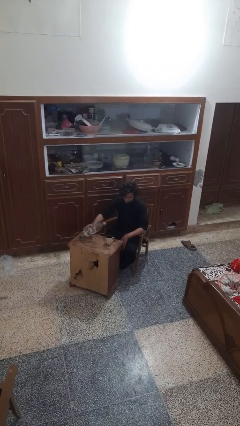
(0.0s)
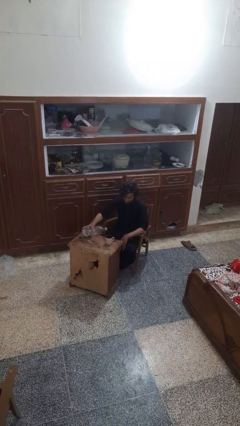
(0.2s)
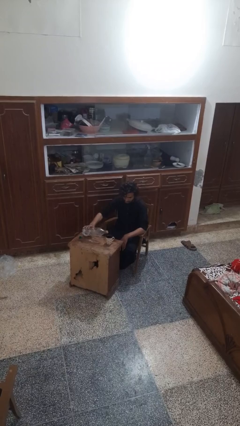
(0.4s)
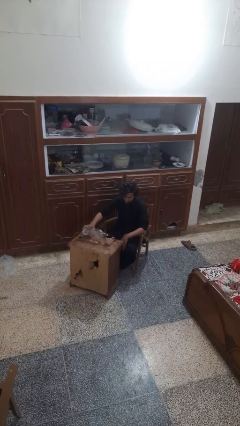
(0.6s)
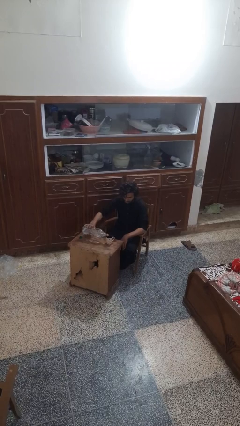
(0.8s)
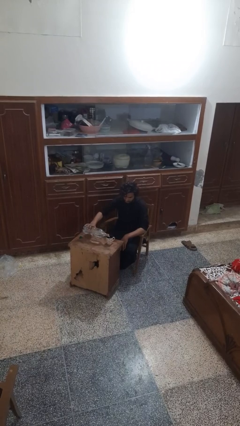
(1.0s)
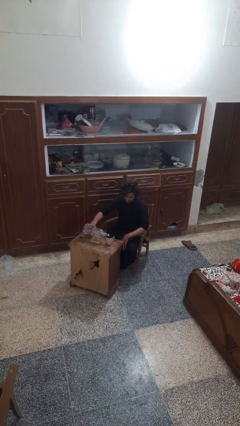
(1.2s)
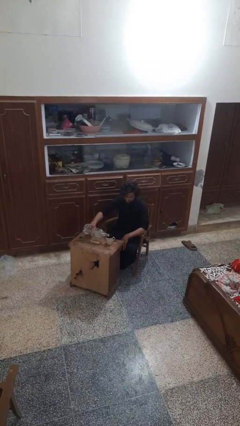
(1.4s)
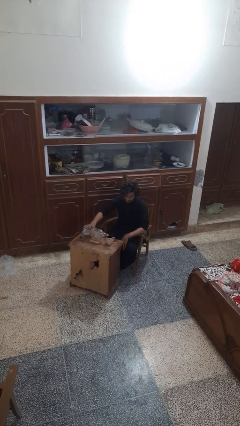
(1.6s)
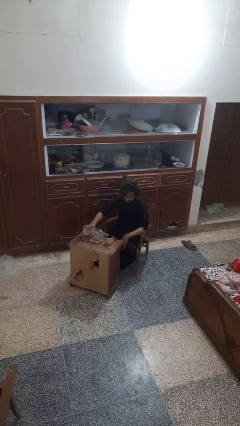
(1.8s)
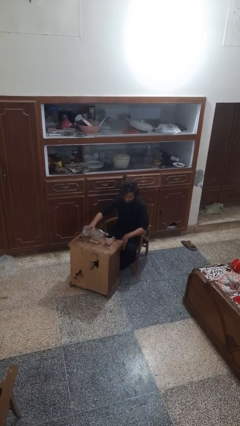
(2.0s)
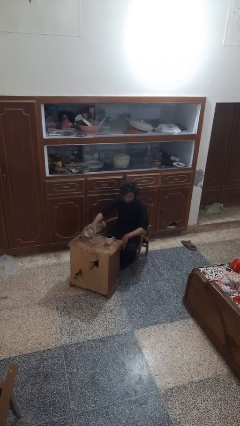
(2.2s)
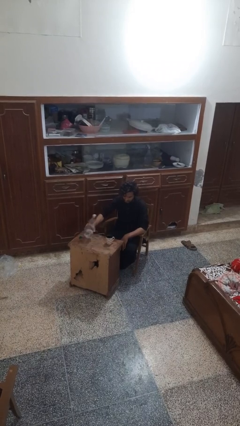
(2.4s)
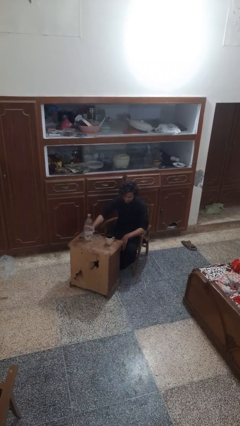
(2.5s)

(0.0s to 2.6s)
person pours liquid into cup

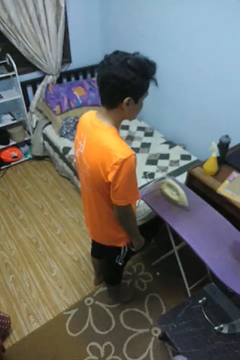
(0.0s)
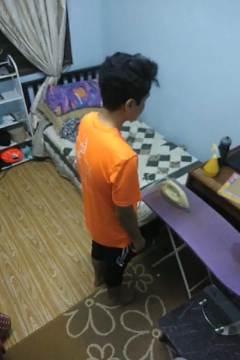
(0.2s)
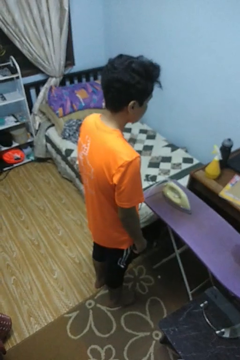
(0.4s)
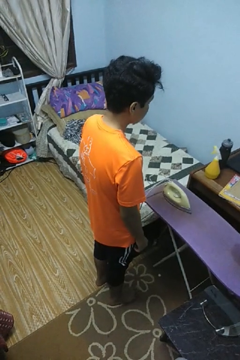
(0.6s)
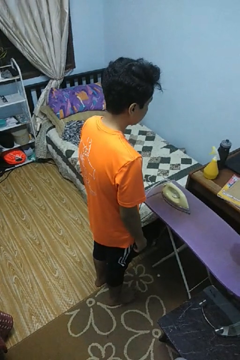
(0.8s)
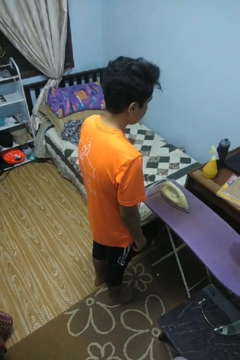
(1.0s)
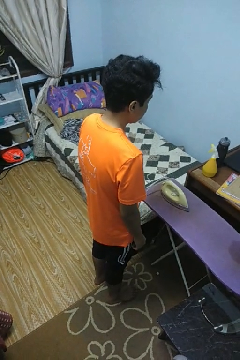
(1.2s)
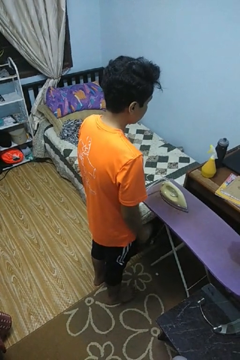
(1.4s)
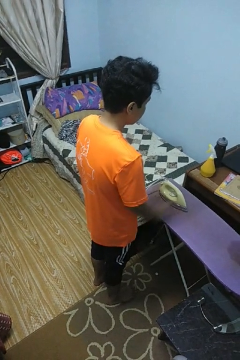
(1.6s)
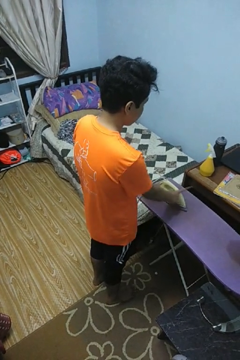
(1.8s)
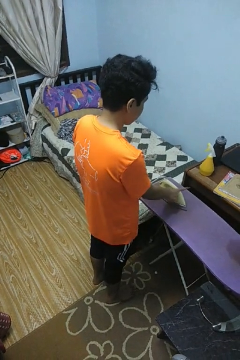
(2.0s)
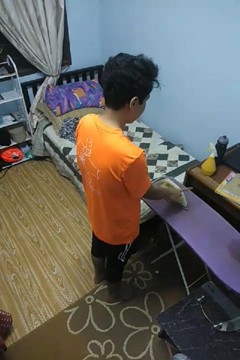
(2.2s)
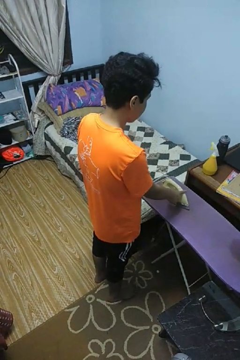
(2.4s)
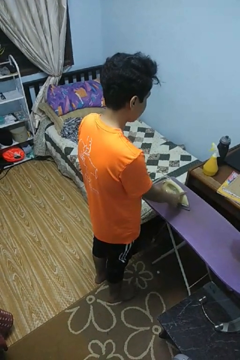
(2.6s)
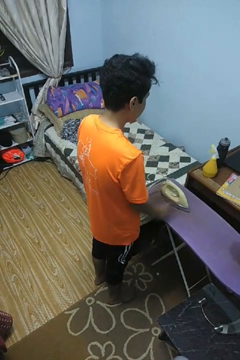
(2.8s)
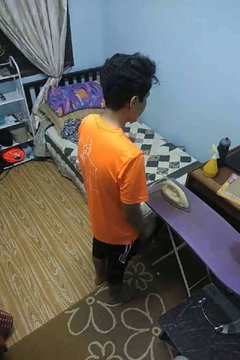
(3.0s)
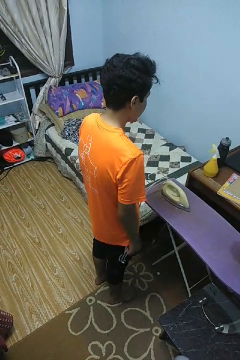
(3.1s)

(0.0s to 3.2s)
person taps object with finger

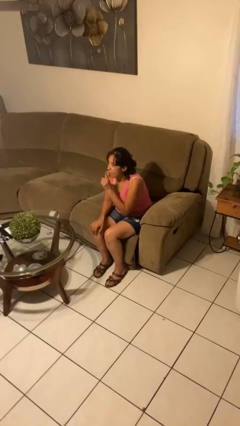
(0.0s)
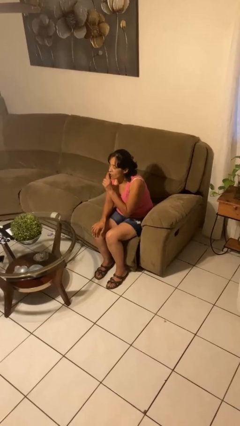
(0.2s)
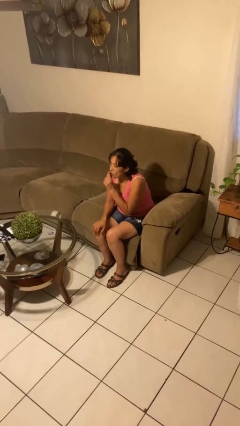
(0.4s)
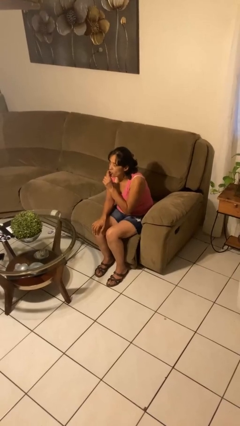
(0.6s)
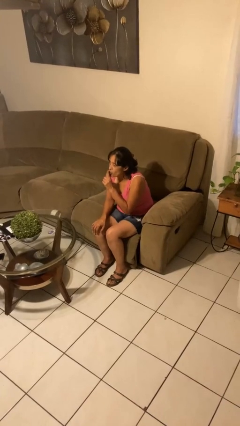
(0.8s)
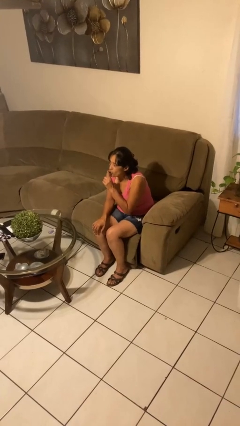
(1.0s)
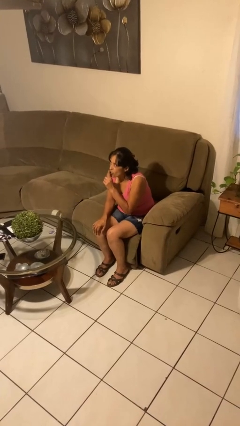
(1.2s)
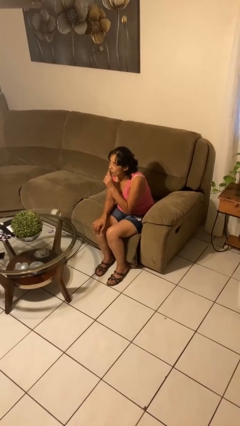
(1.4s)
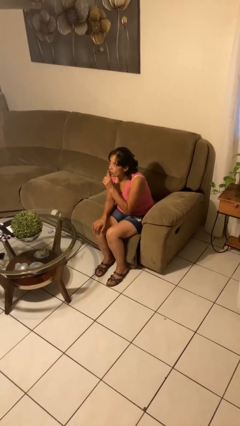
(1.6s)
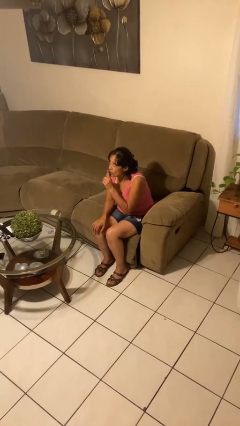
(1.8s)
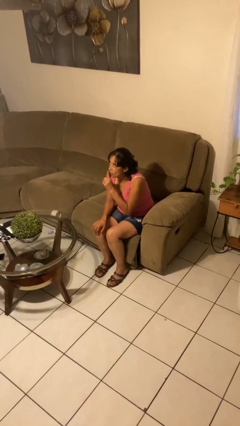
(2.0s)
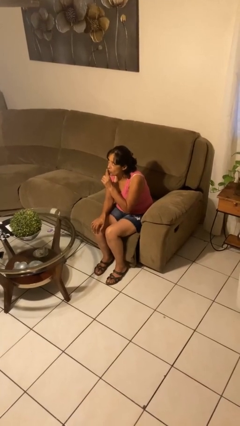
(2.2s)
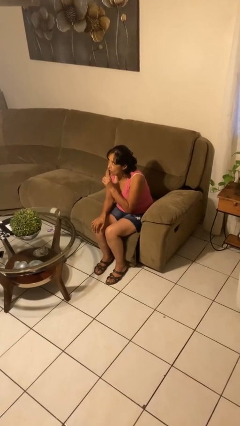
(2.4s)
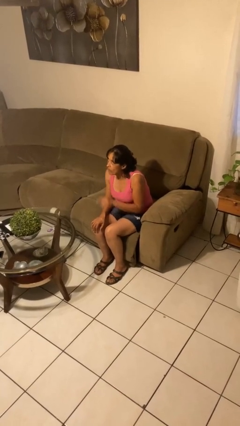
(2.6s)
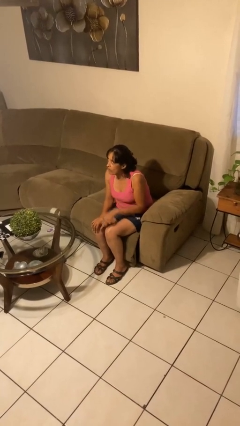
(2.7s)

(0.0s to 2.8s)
person gestures be quiet

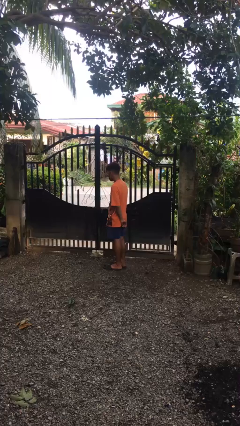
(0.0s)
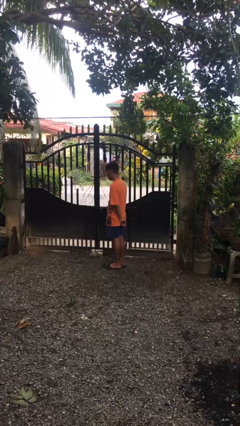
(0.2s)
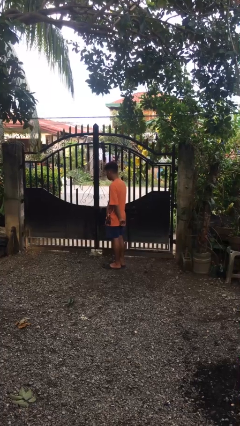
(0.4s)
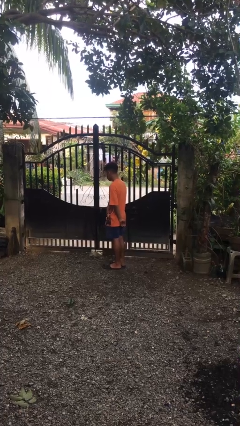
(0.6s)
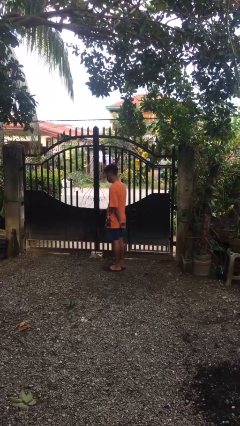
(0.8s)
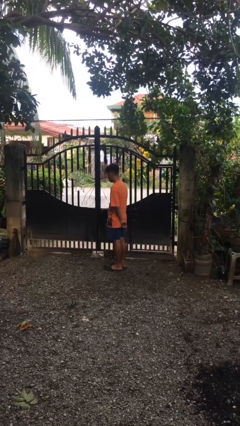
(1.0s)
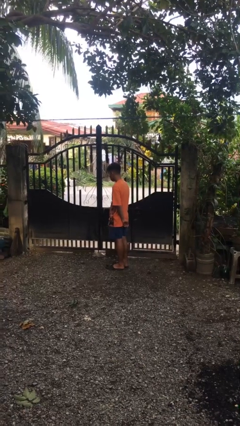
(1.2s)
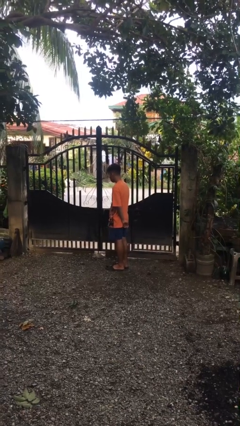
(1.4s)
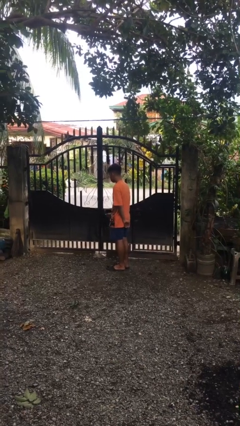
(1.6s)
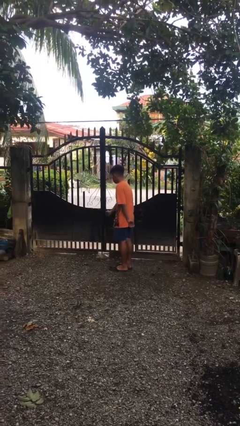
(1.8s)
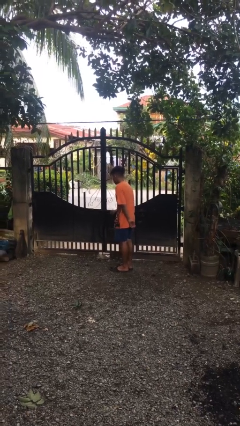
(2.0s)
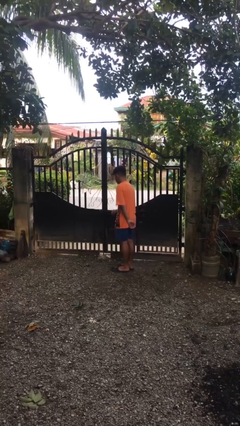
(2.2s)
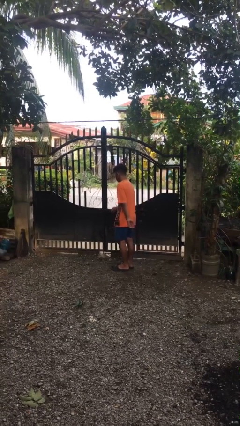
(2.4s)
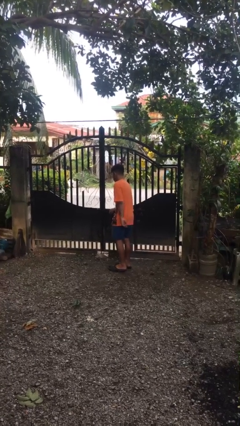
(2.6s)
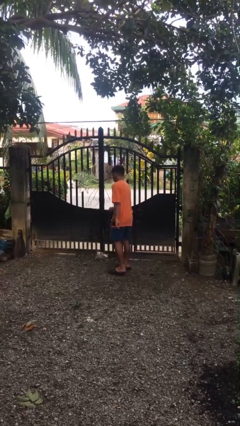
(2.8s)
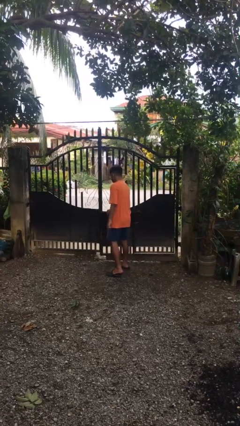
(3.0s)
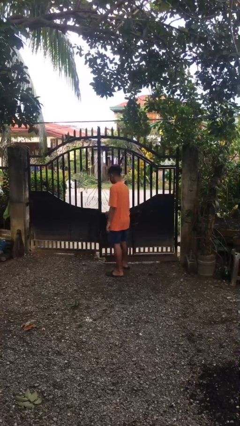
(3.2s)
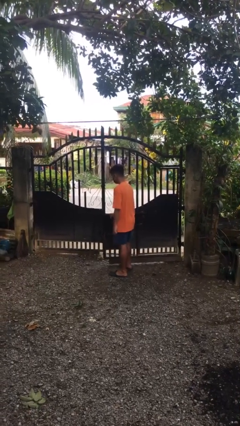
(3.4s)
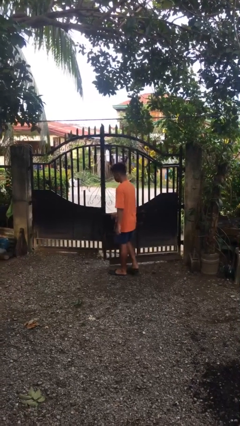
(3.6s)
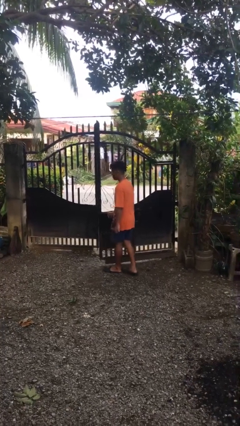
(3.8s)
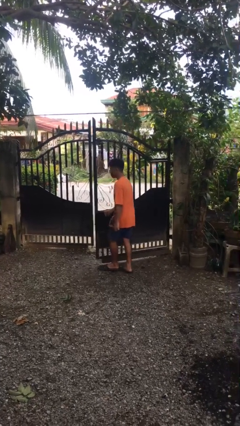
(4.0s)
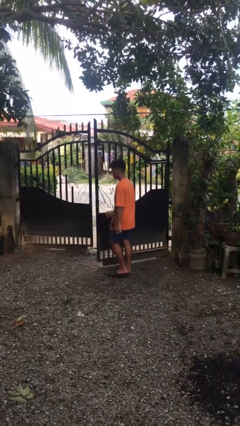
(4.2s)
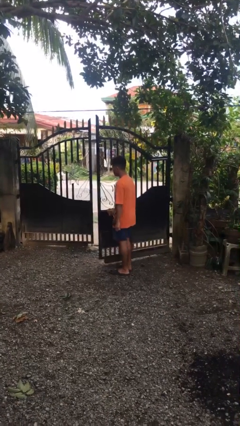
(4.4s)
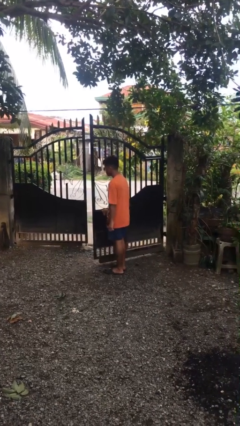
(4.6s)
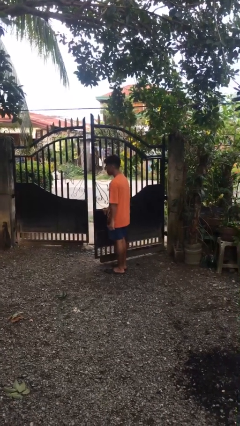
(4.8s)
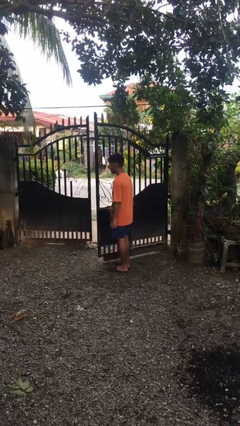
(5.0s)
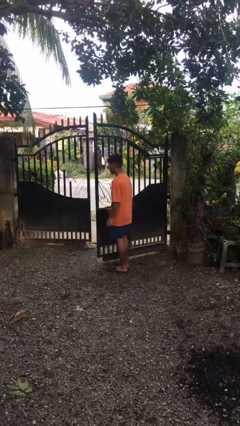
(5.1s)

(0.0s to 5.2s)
person opens gate

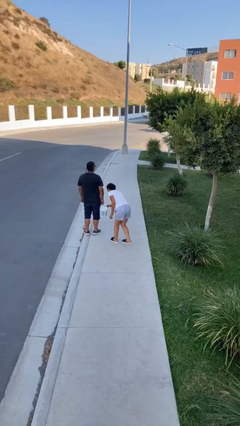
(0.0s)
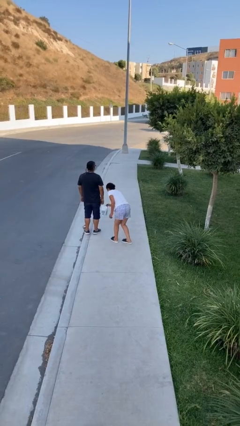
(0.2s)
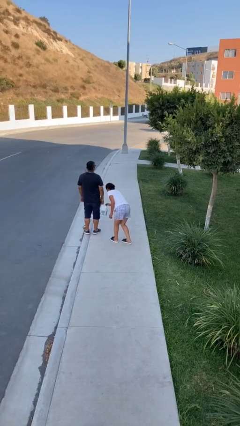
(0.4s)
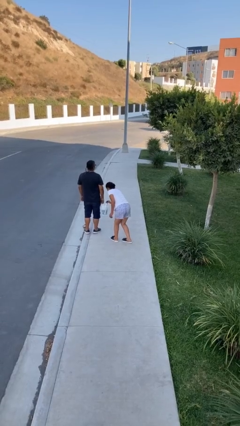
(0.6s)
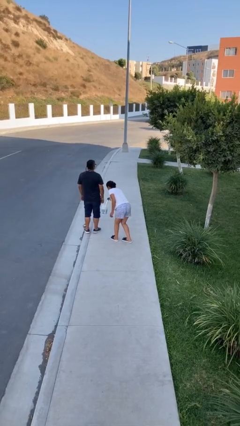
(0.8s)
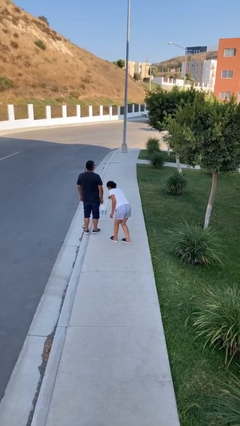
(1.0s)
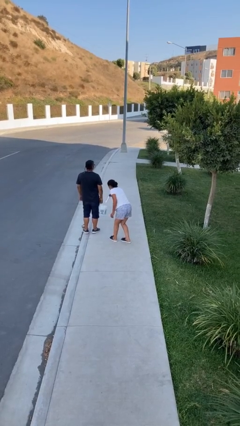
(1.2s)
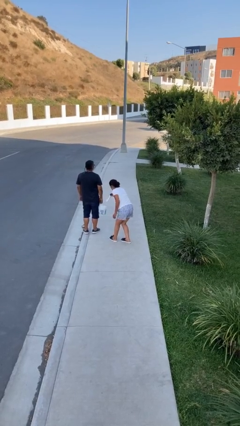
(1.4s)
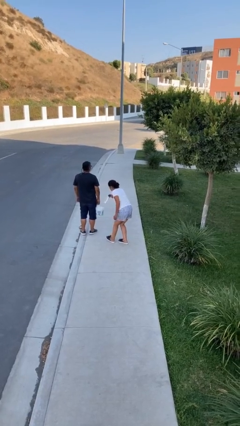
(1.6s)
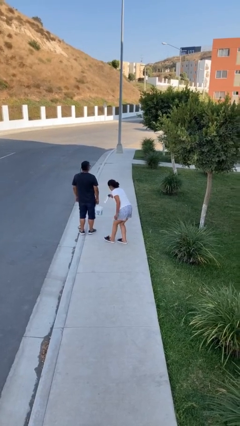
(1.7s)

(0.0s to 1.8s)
person steals object from person

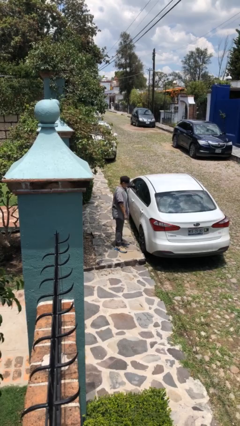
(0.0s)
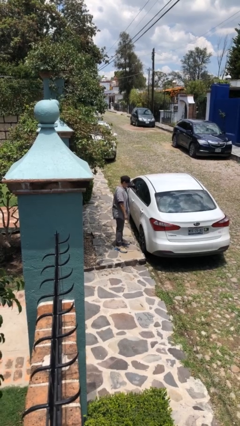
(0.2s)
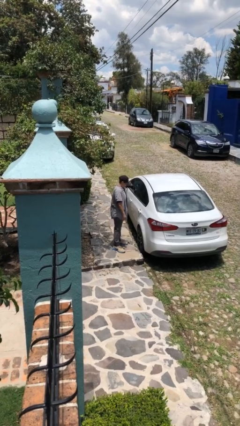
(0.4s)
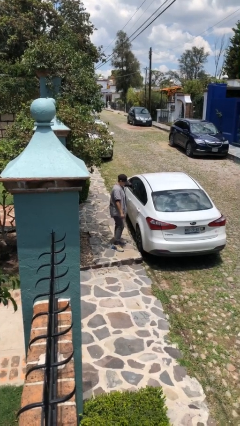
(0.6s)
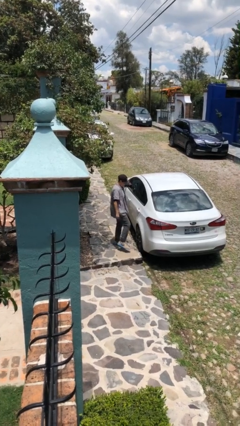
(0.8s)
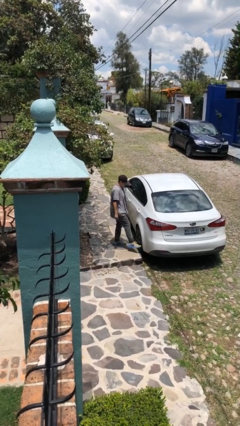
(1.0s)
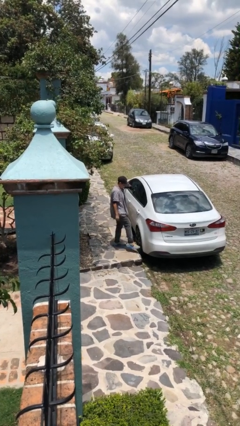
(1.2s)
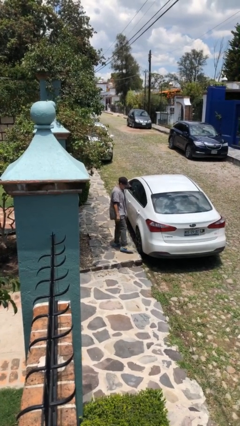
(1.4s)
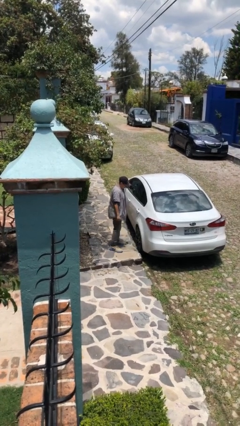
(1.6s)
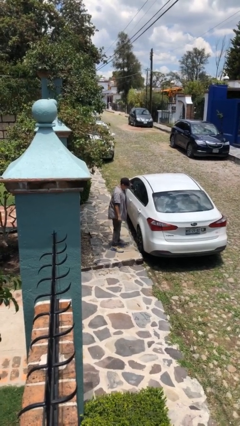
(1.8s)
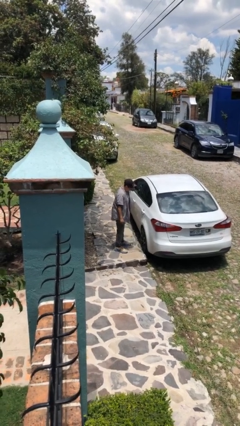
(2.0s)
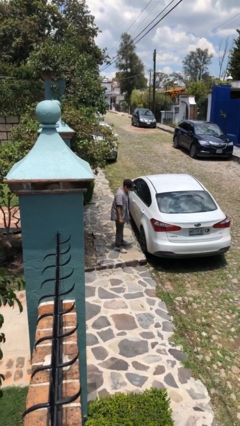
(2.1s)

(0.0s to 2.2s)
person kicks car tires

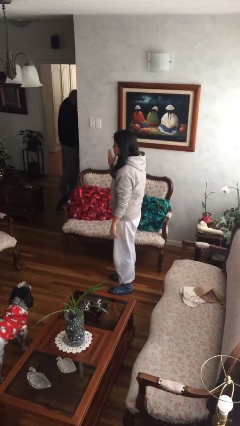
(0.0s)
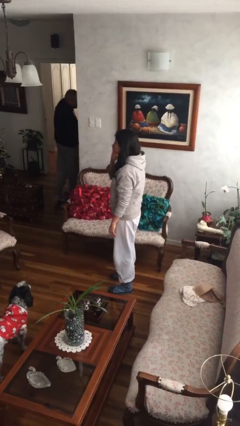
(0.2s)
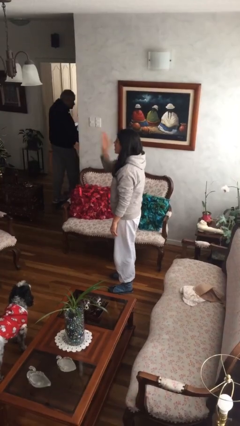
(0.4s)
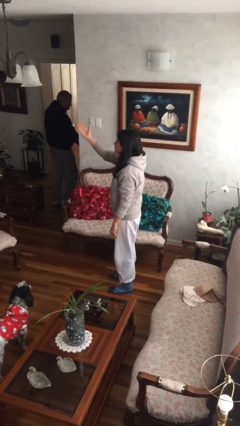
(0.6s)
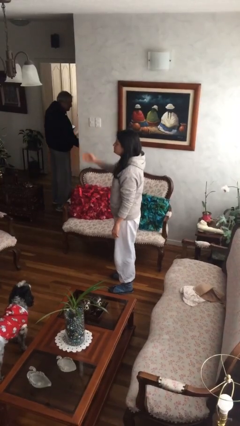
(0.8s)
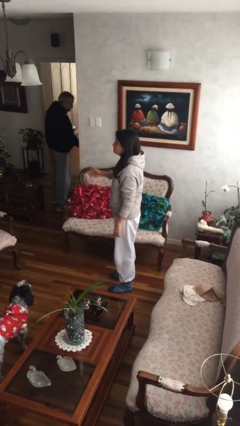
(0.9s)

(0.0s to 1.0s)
person gestures blow kiss
